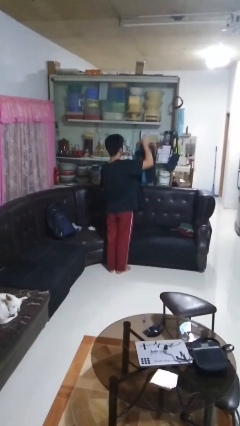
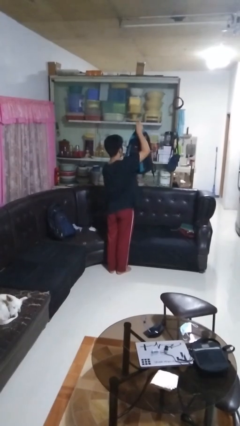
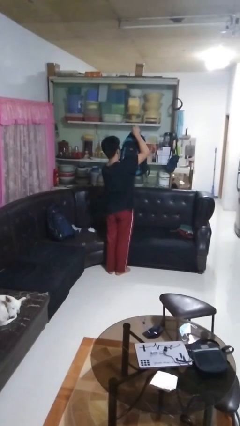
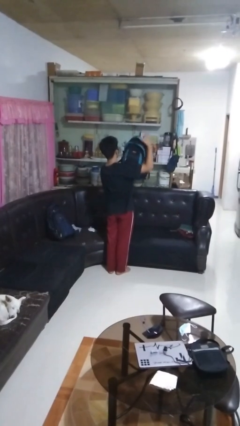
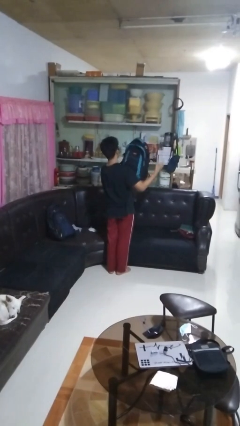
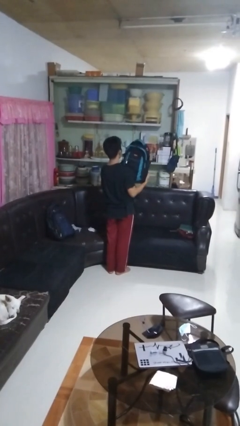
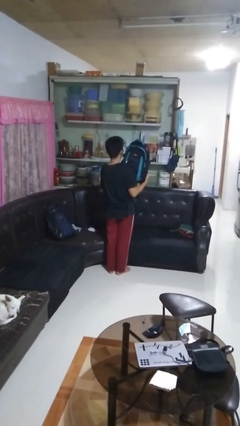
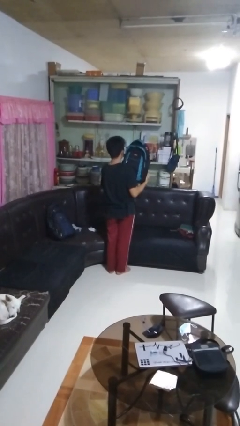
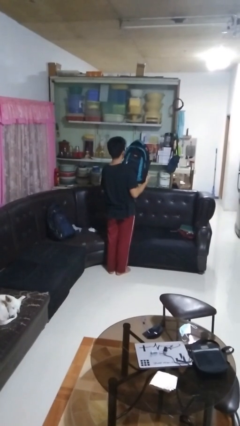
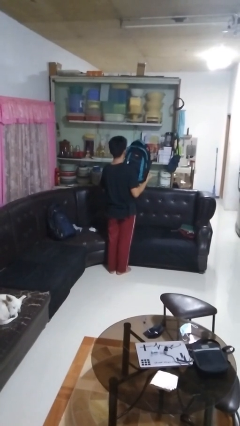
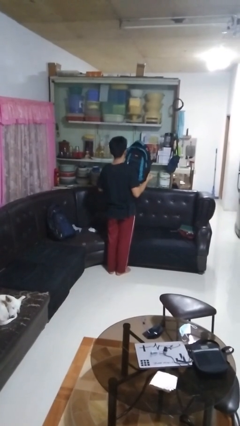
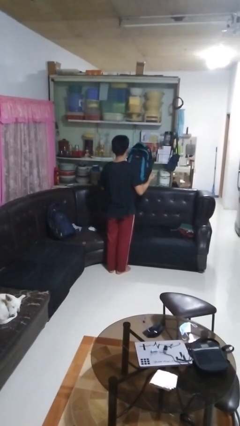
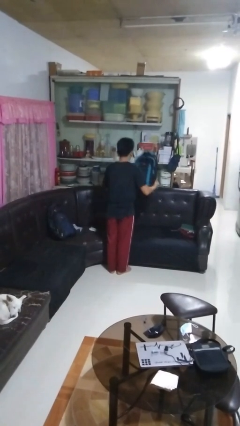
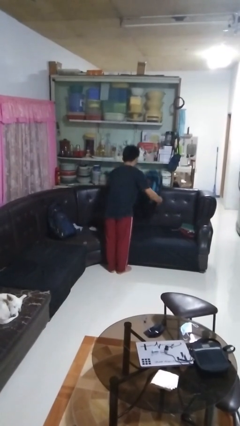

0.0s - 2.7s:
person picks up object from couch

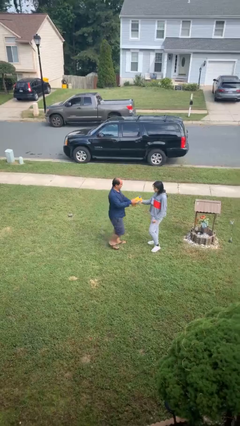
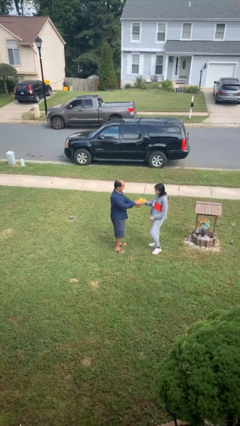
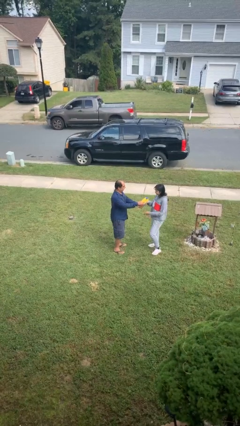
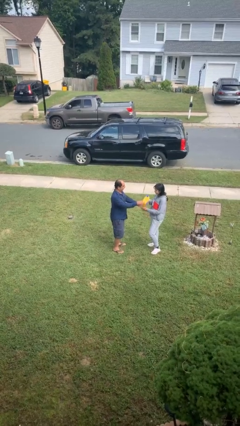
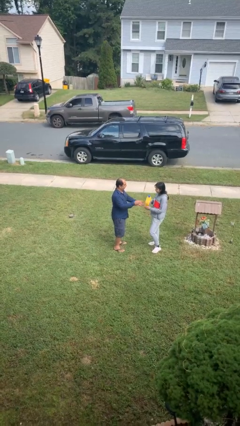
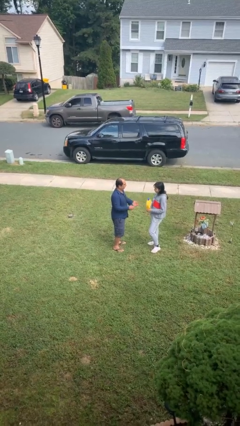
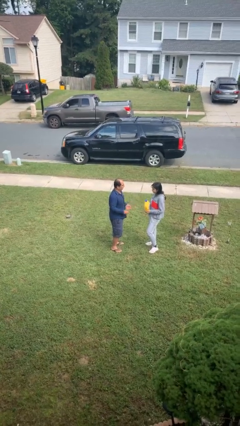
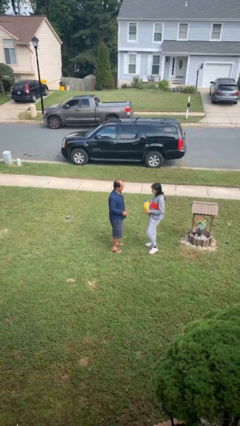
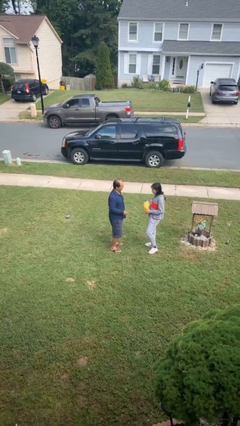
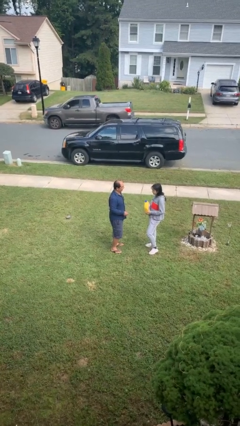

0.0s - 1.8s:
person transfers object to person

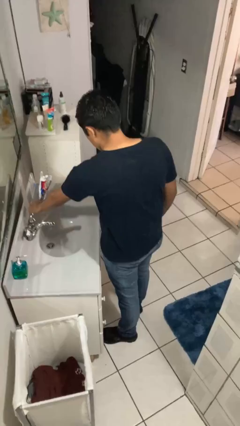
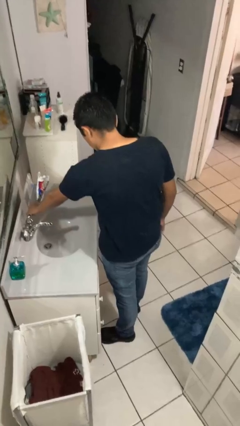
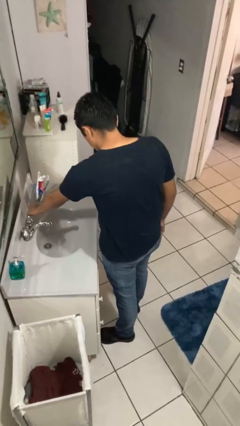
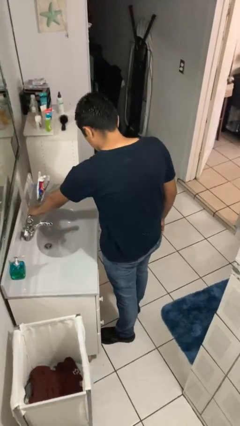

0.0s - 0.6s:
person turns on faucet

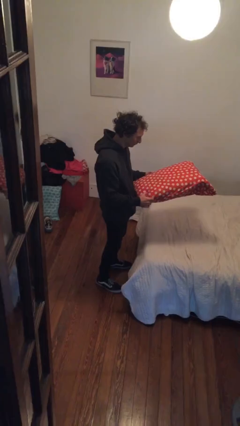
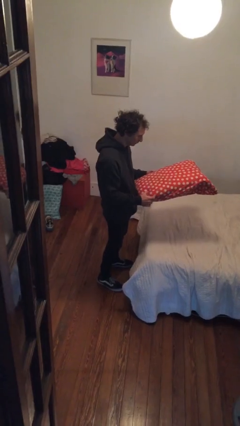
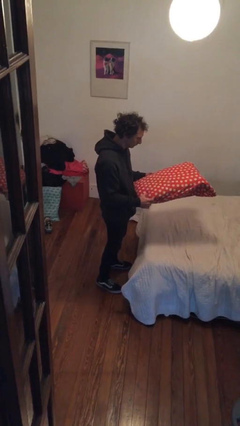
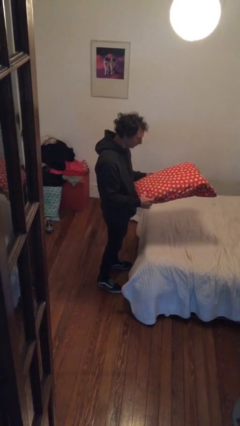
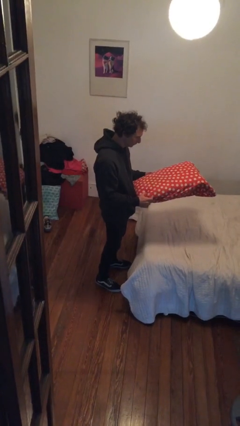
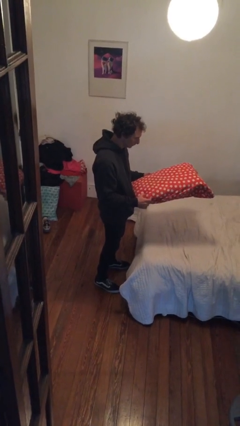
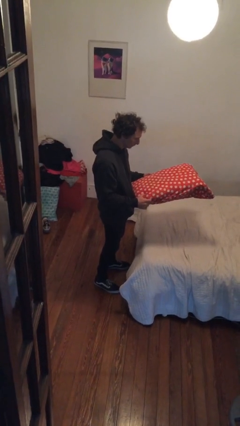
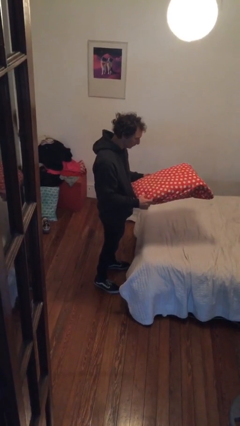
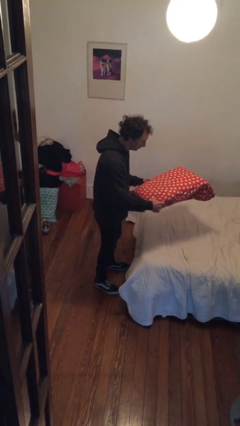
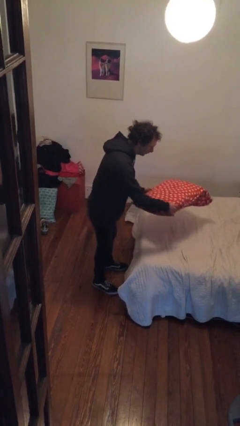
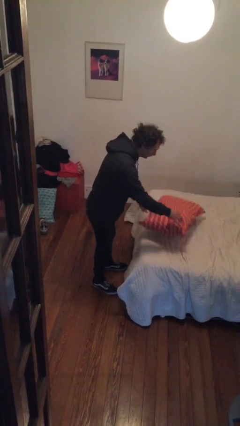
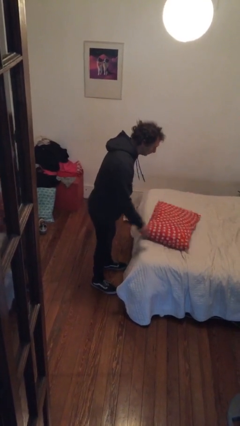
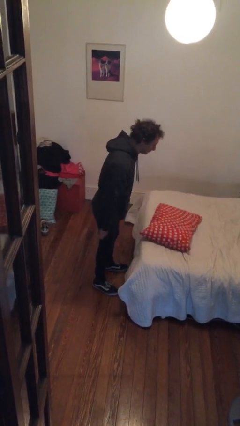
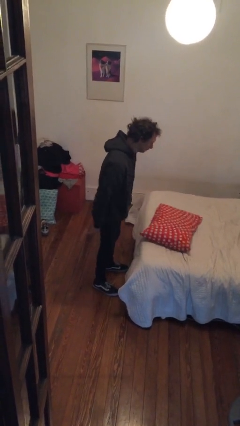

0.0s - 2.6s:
person puts down object on bed

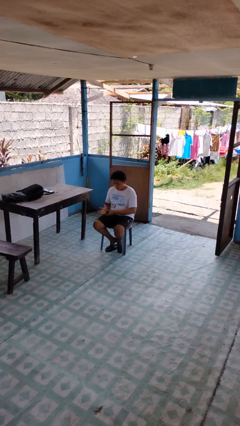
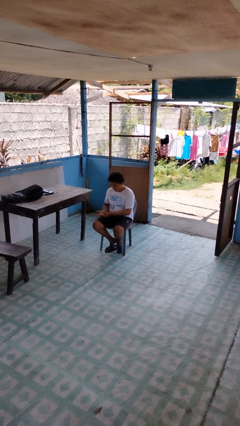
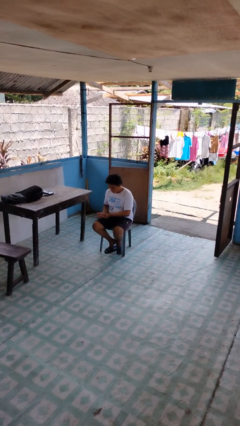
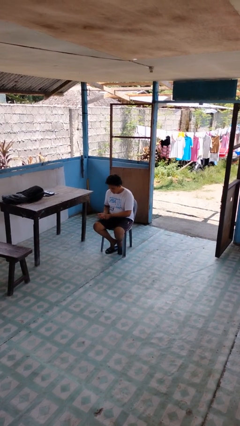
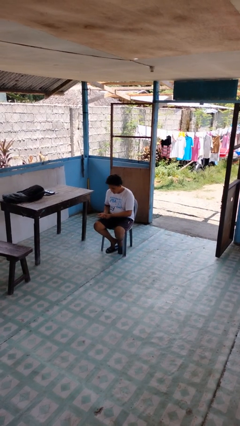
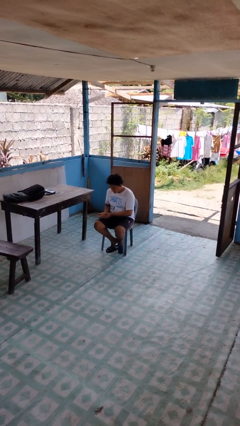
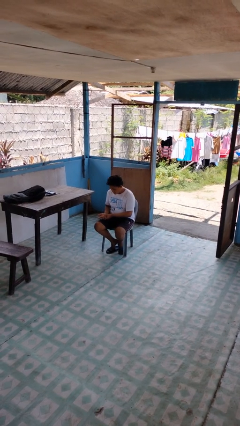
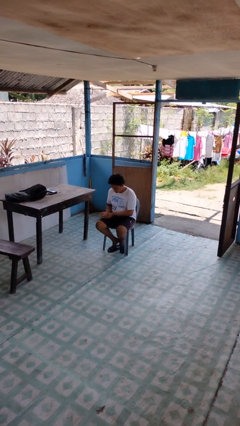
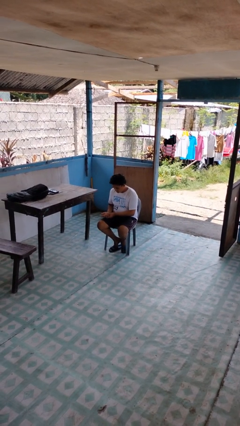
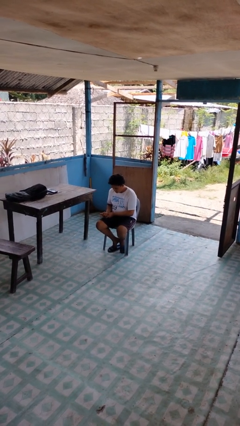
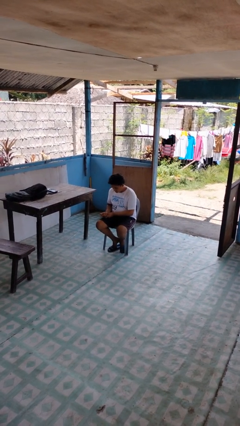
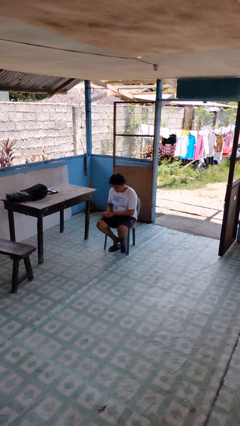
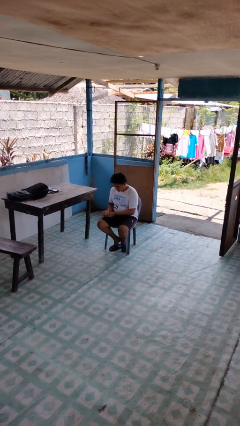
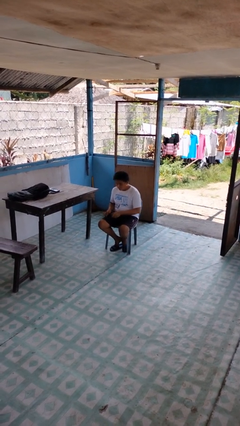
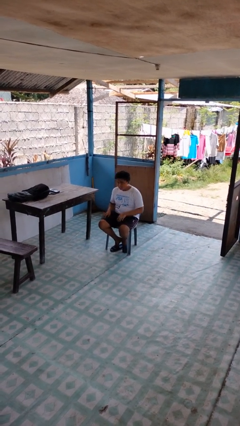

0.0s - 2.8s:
person looks at hands in lap

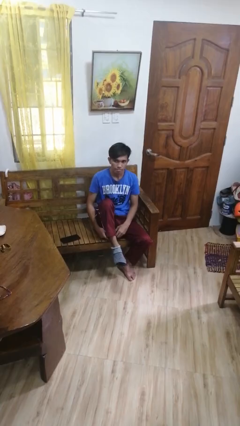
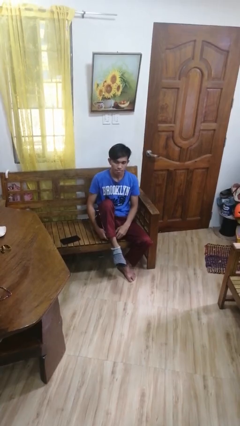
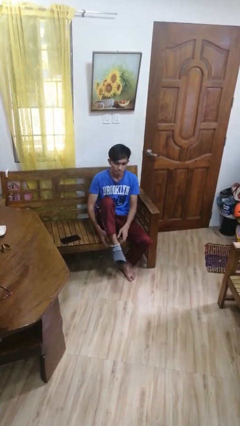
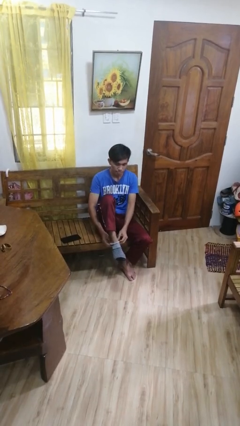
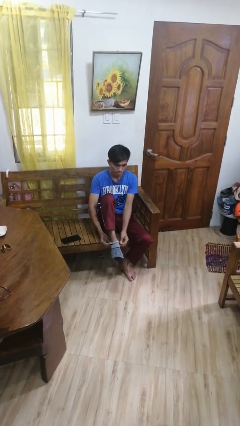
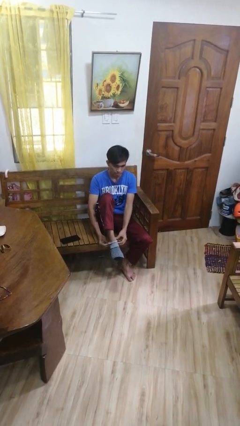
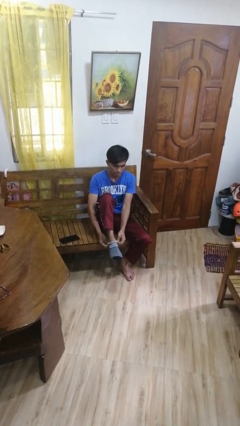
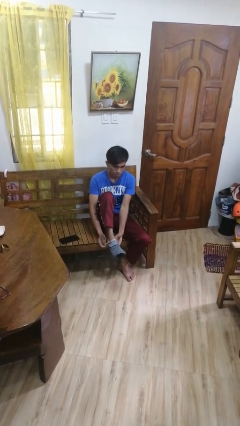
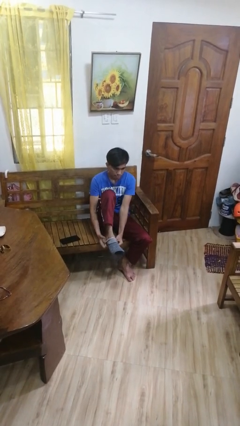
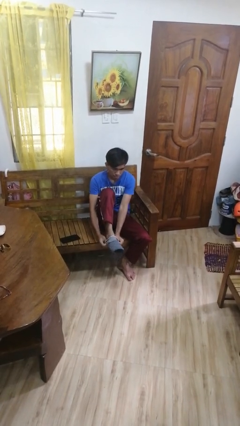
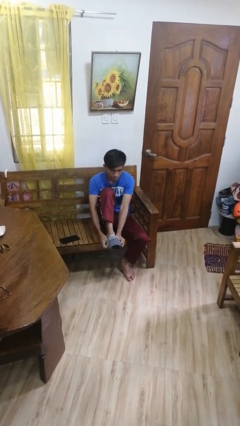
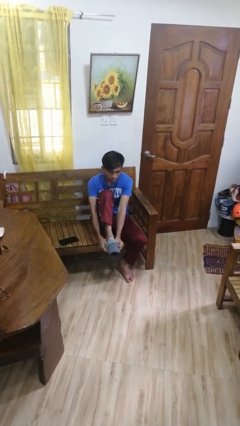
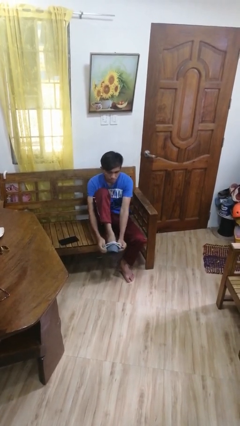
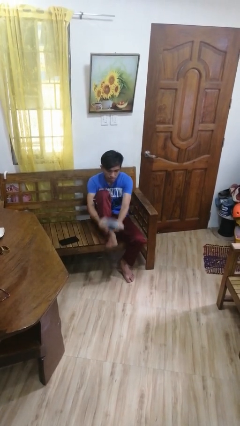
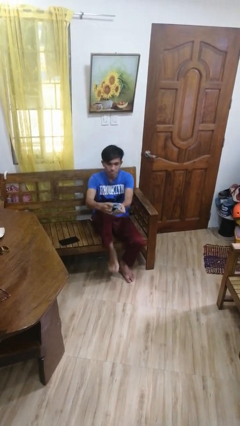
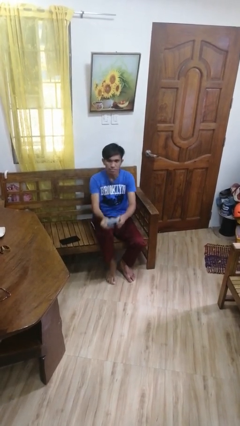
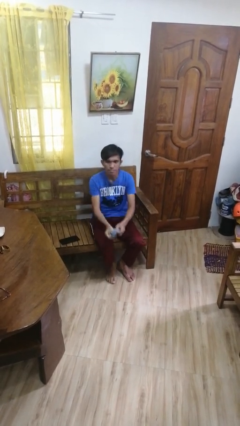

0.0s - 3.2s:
person takes off socks

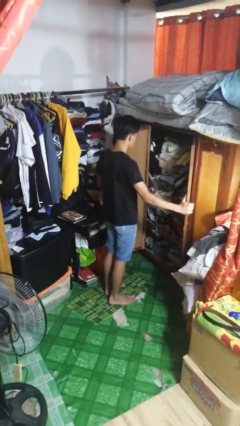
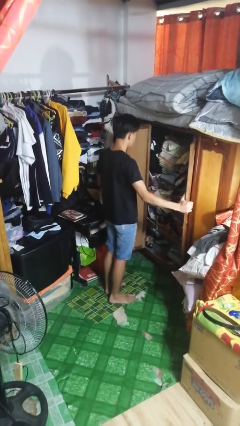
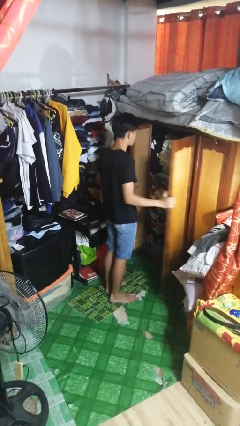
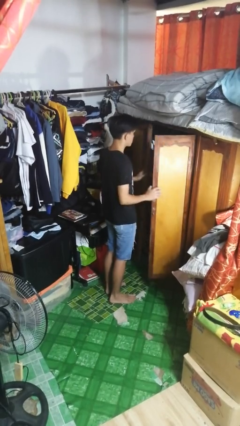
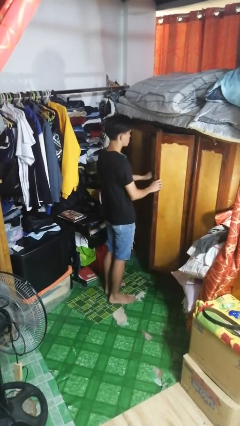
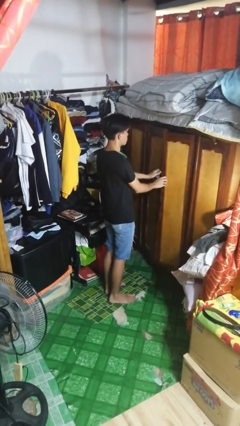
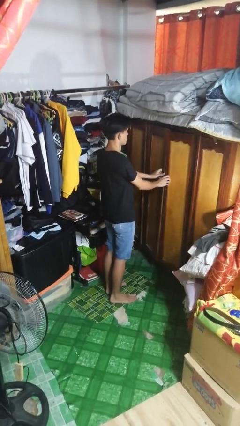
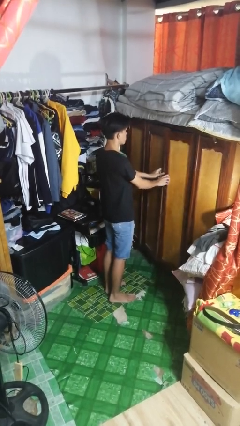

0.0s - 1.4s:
person closes closet door

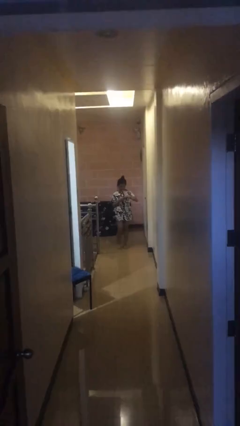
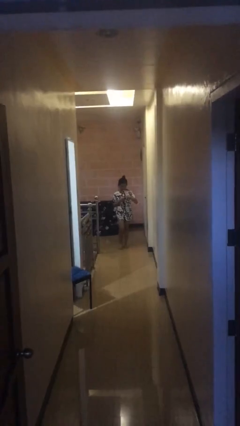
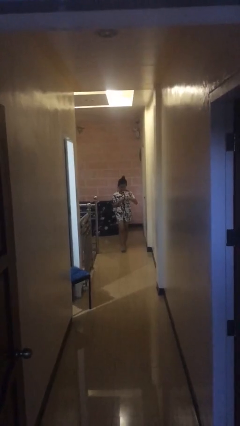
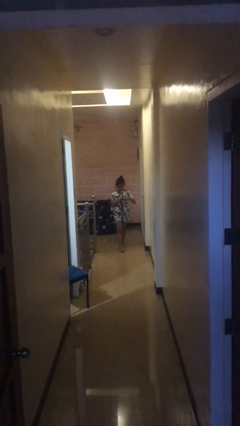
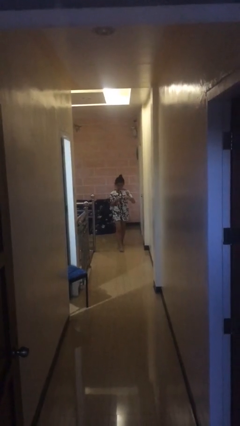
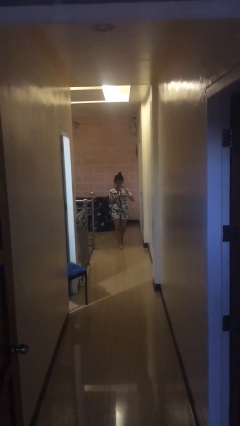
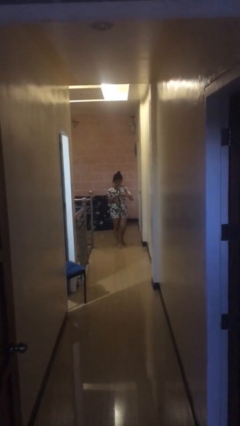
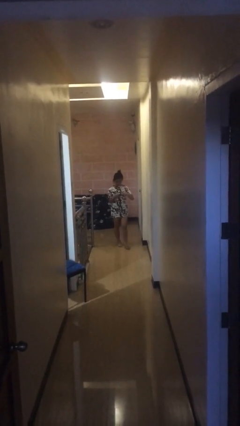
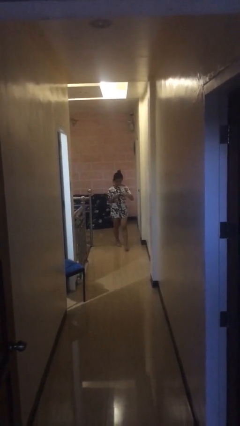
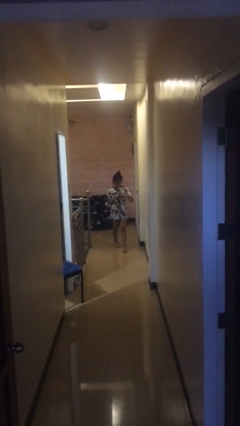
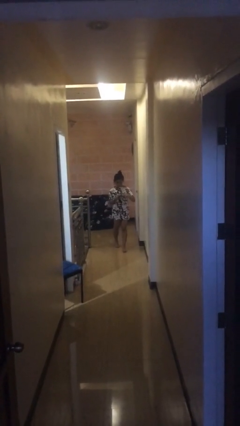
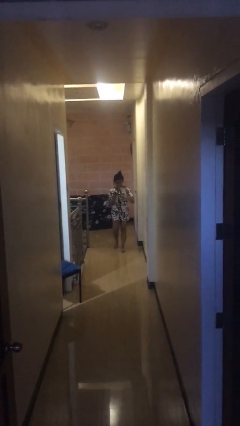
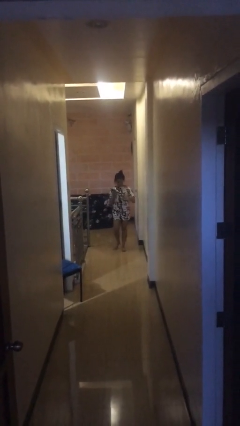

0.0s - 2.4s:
person texts on phone
